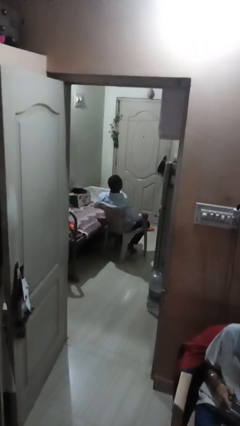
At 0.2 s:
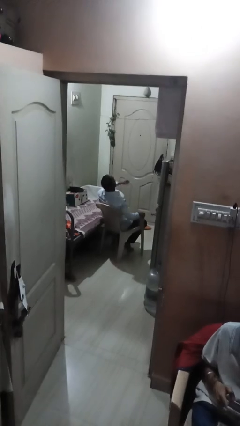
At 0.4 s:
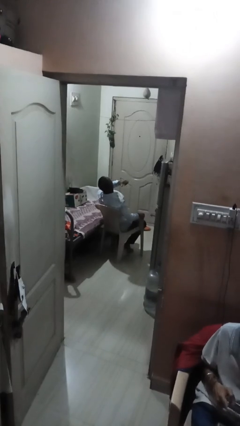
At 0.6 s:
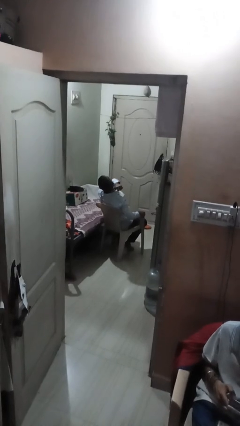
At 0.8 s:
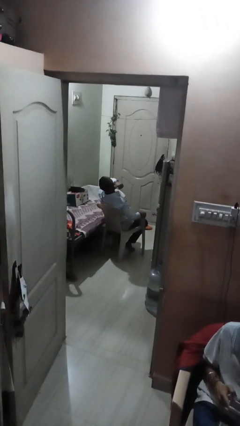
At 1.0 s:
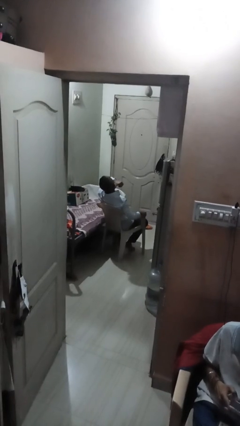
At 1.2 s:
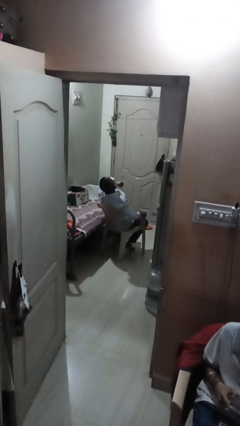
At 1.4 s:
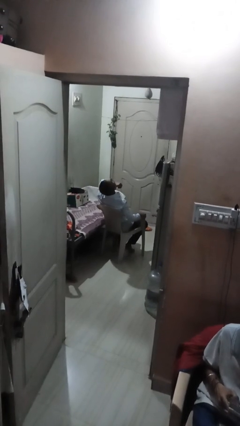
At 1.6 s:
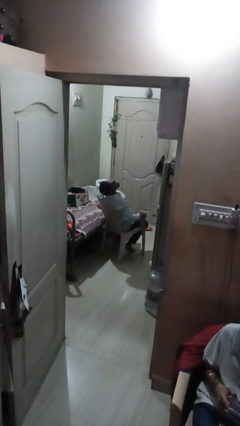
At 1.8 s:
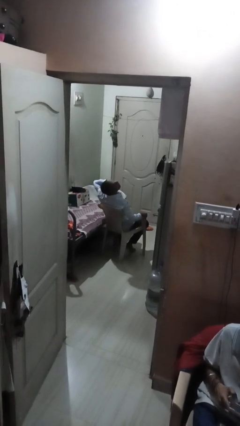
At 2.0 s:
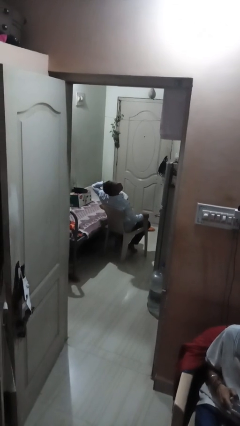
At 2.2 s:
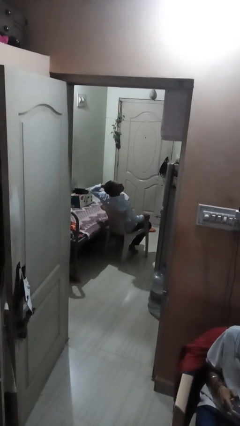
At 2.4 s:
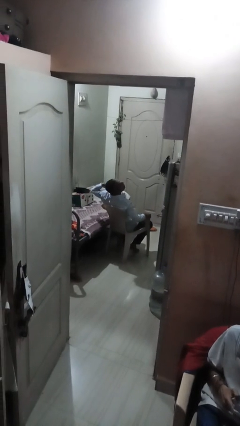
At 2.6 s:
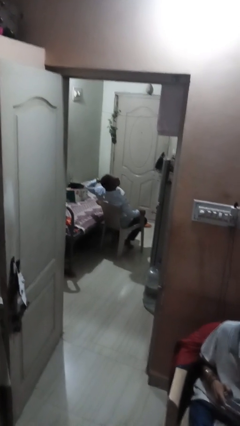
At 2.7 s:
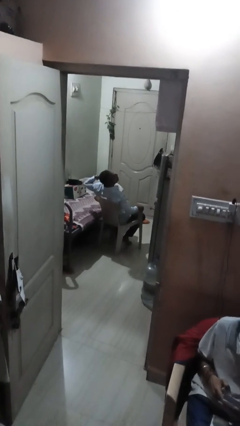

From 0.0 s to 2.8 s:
person gestures cut

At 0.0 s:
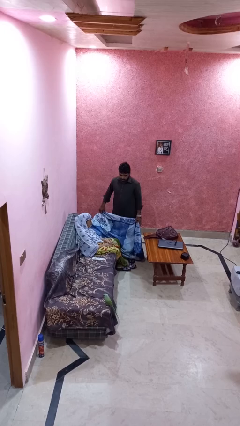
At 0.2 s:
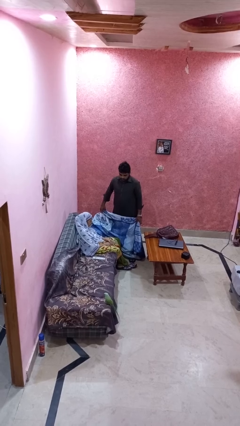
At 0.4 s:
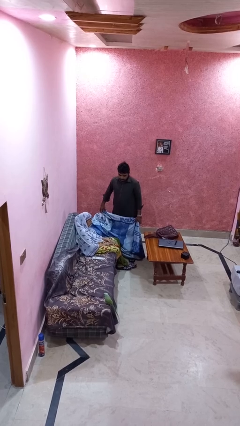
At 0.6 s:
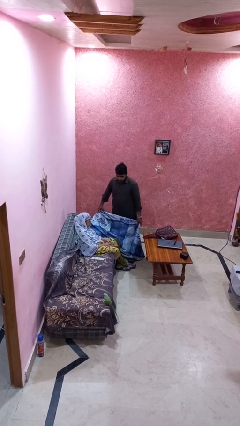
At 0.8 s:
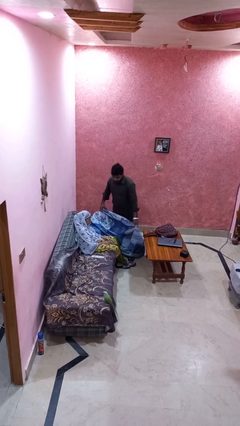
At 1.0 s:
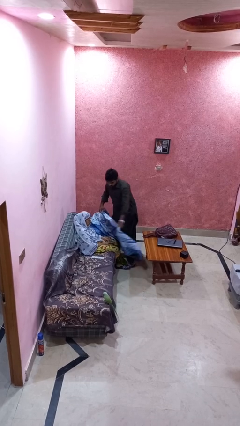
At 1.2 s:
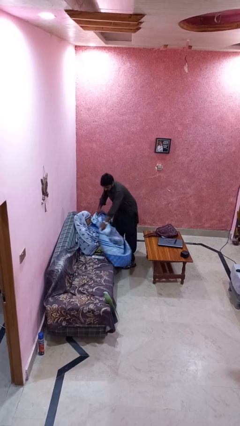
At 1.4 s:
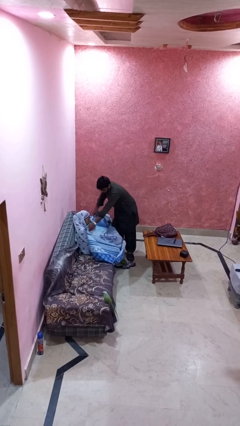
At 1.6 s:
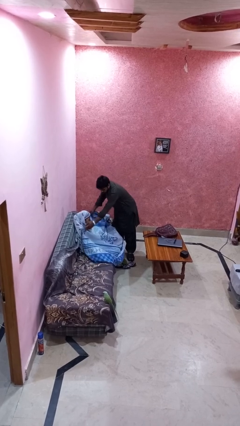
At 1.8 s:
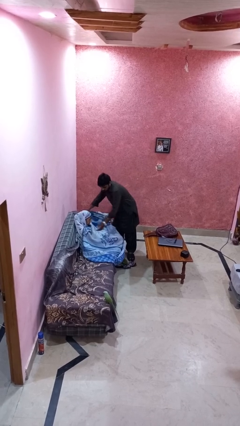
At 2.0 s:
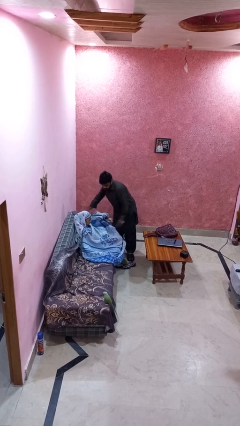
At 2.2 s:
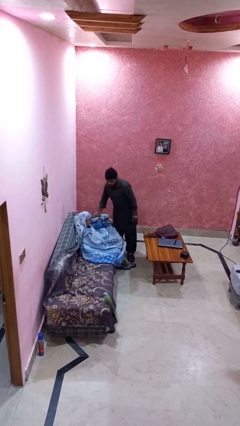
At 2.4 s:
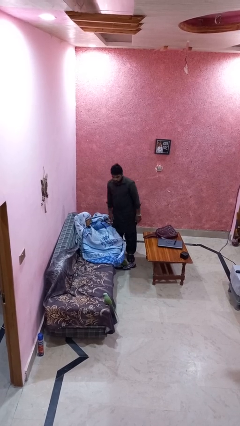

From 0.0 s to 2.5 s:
person covers friend with blanket

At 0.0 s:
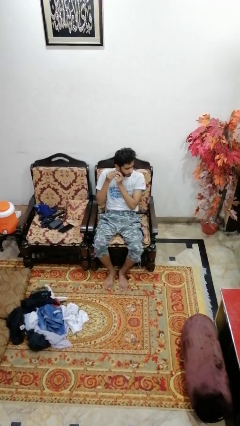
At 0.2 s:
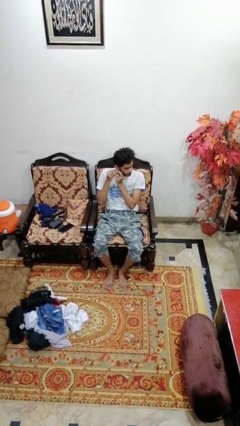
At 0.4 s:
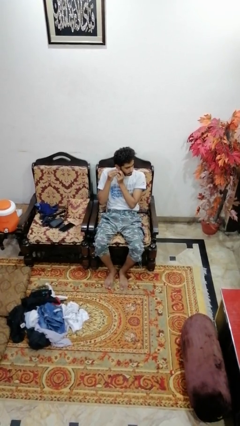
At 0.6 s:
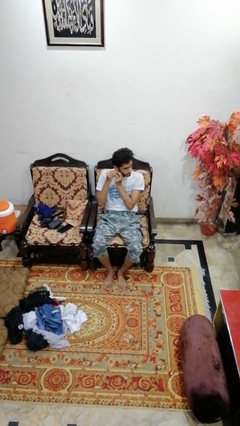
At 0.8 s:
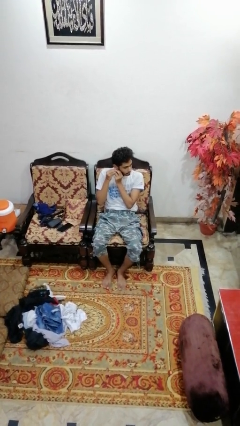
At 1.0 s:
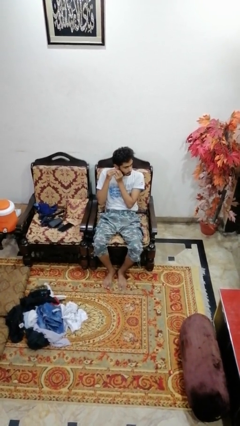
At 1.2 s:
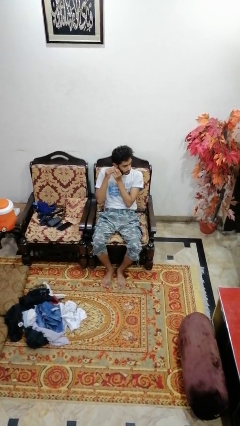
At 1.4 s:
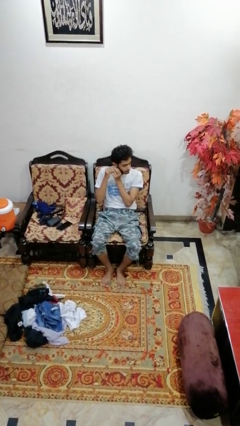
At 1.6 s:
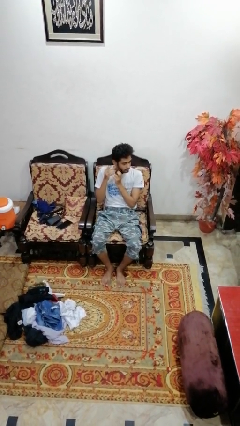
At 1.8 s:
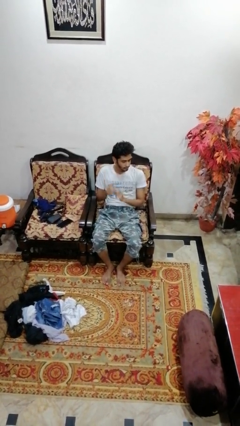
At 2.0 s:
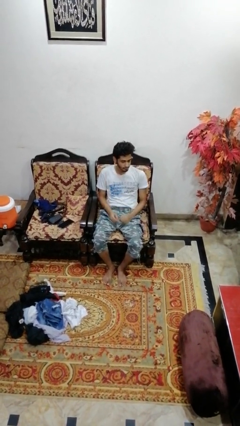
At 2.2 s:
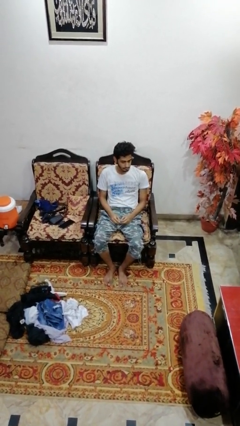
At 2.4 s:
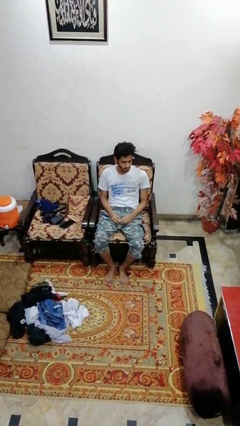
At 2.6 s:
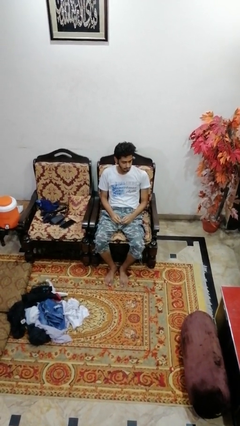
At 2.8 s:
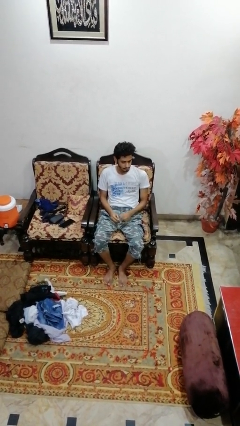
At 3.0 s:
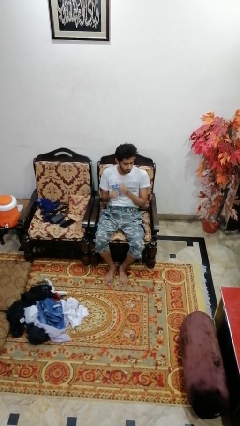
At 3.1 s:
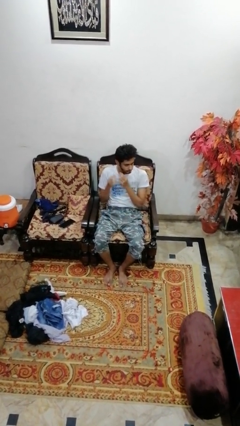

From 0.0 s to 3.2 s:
person puts on earrings

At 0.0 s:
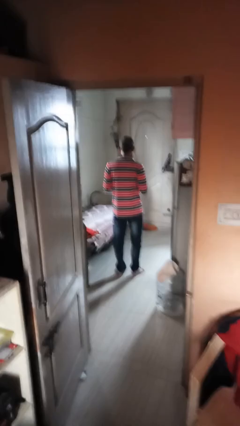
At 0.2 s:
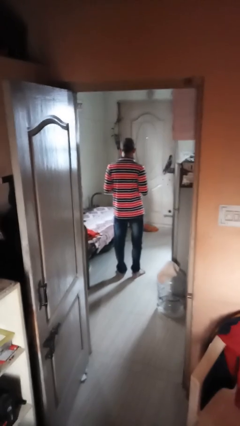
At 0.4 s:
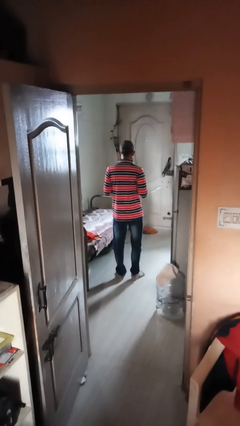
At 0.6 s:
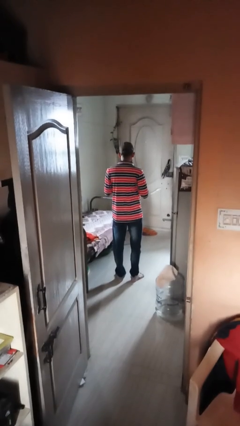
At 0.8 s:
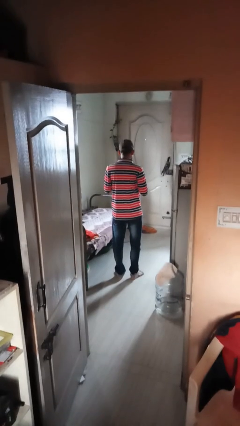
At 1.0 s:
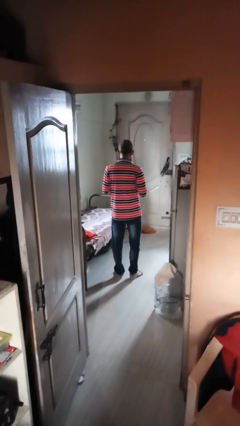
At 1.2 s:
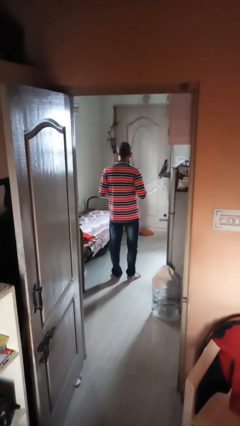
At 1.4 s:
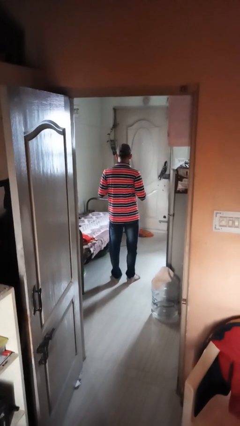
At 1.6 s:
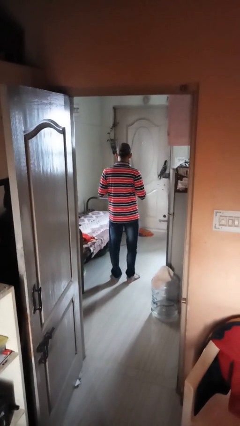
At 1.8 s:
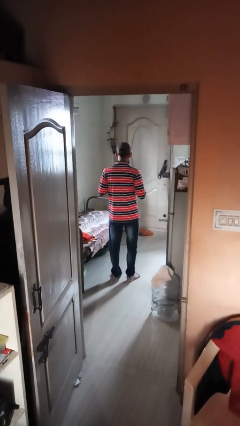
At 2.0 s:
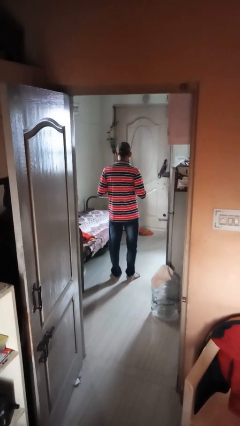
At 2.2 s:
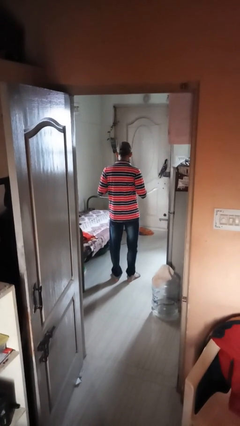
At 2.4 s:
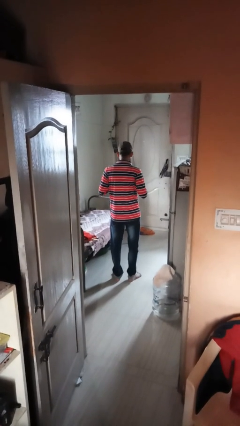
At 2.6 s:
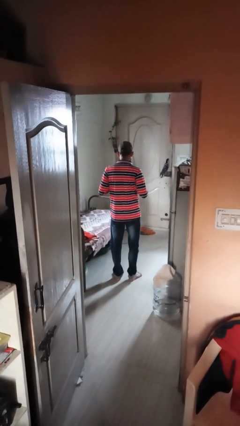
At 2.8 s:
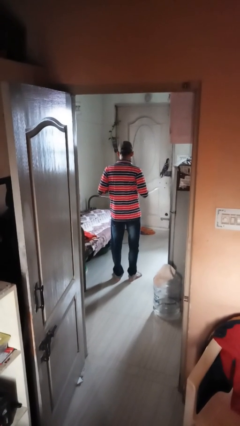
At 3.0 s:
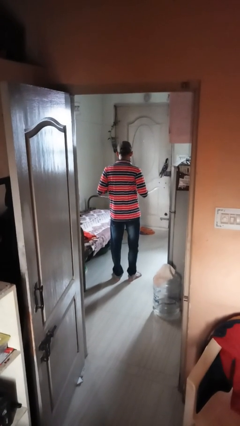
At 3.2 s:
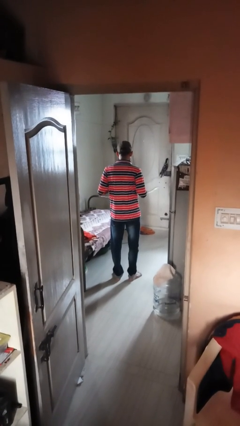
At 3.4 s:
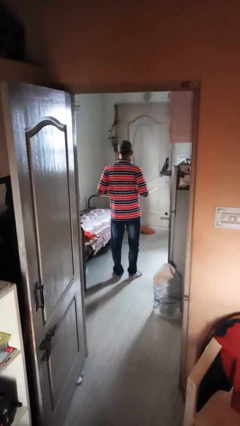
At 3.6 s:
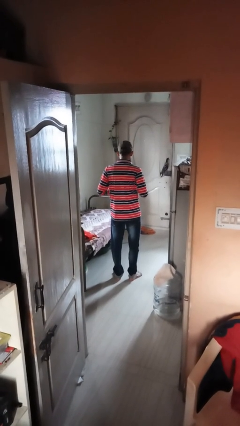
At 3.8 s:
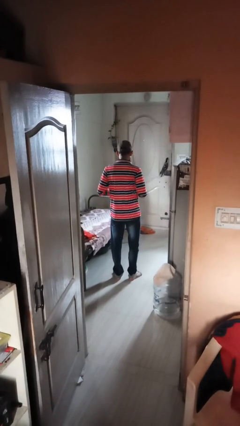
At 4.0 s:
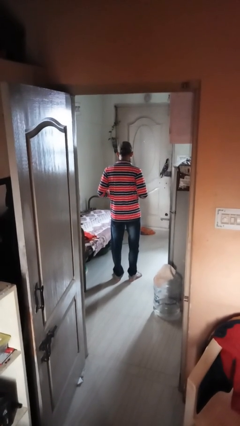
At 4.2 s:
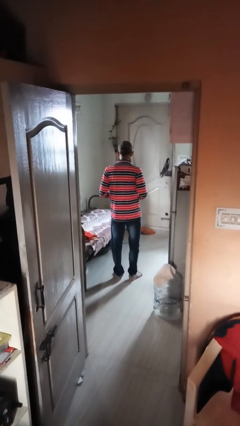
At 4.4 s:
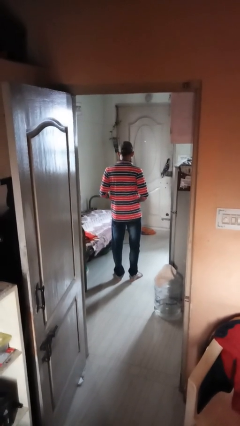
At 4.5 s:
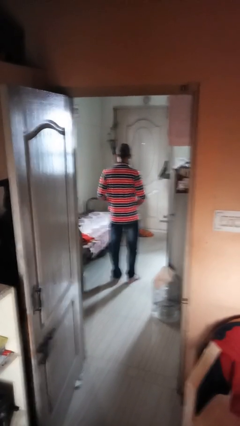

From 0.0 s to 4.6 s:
person unbuttons shirt

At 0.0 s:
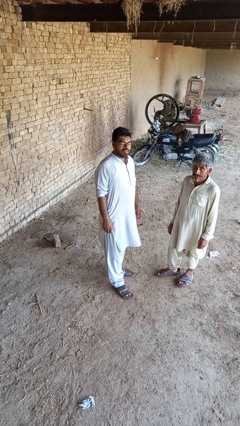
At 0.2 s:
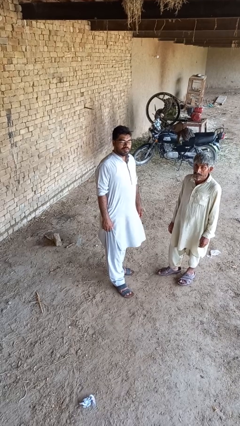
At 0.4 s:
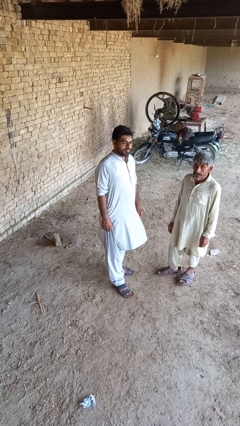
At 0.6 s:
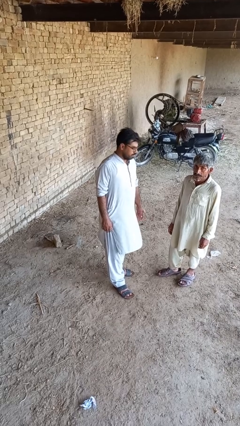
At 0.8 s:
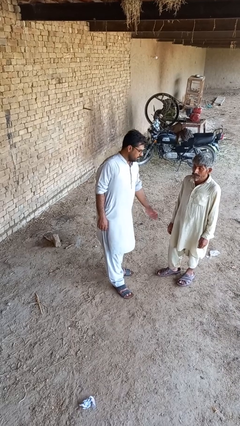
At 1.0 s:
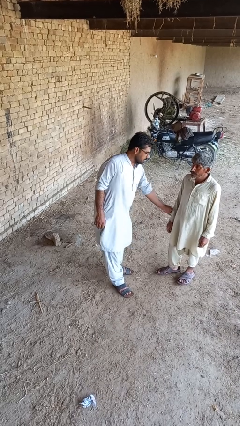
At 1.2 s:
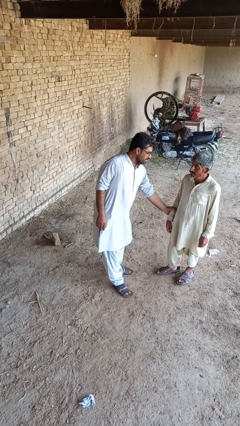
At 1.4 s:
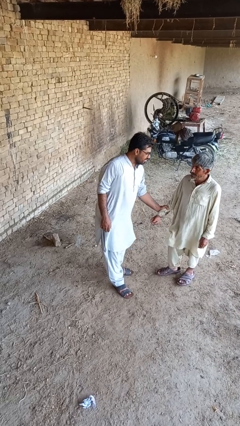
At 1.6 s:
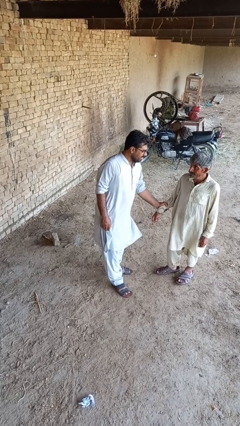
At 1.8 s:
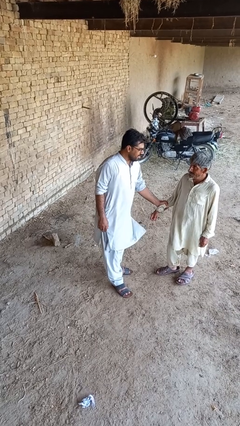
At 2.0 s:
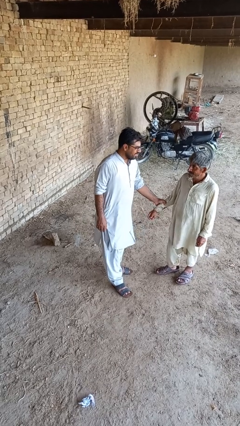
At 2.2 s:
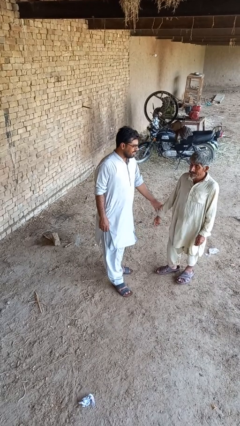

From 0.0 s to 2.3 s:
person grabs person by forearm

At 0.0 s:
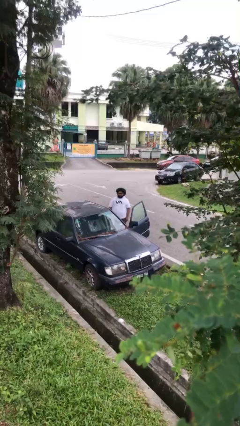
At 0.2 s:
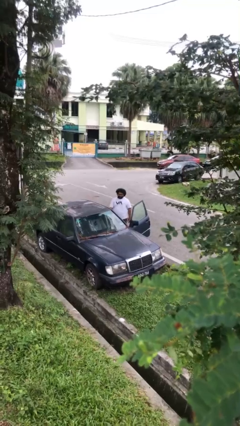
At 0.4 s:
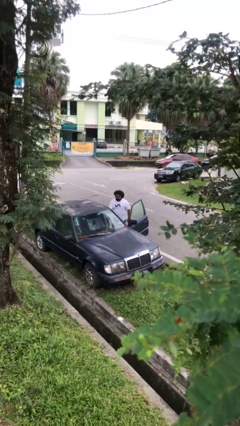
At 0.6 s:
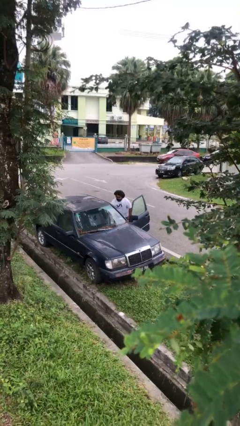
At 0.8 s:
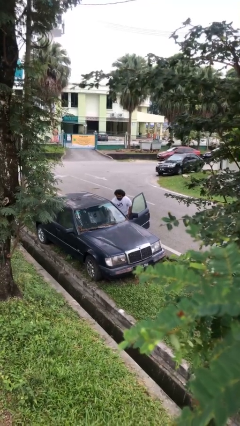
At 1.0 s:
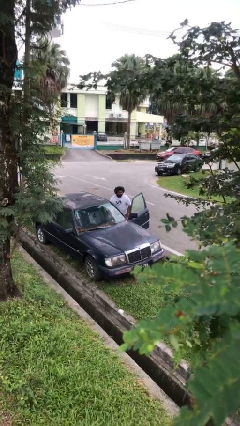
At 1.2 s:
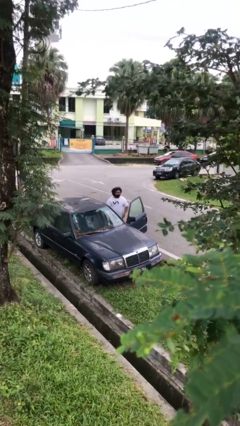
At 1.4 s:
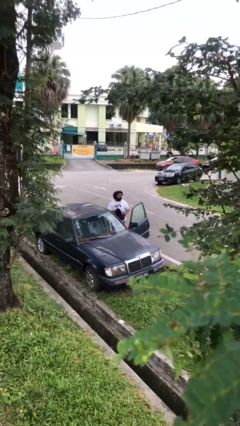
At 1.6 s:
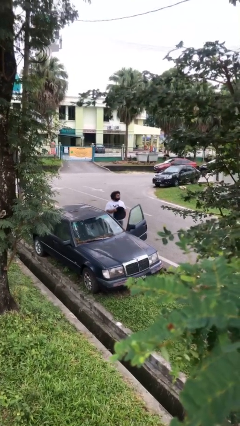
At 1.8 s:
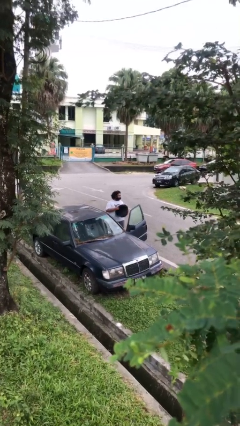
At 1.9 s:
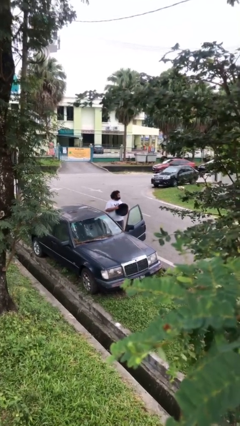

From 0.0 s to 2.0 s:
person unloads car
